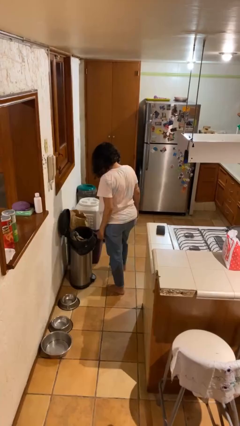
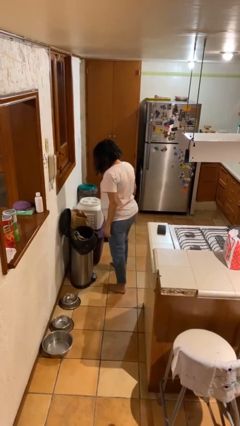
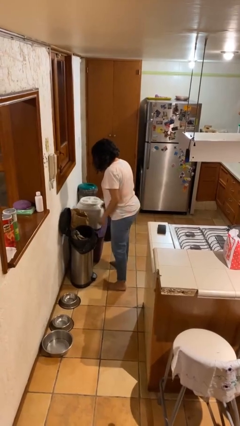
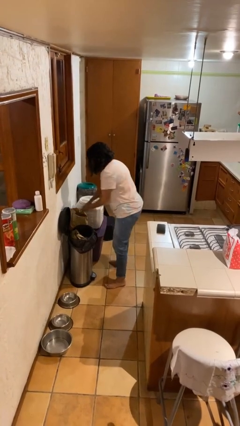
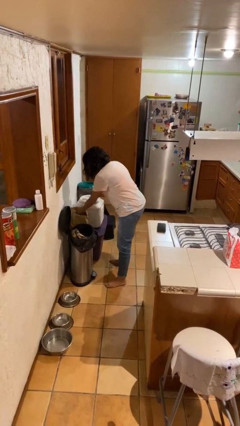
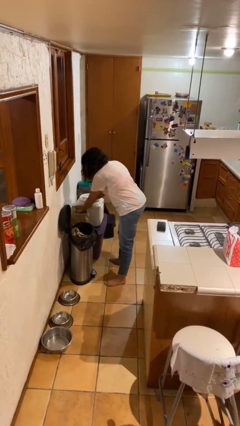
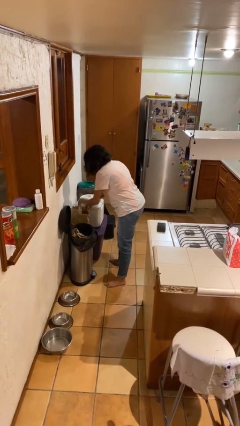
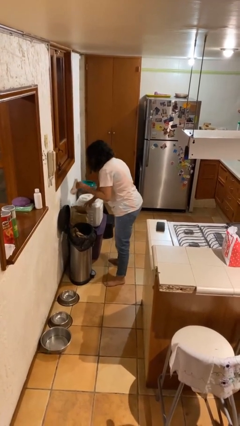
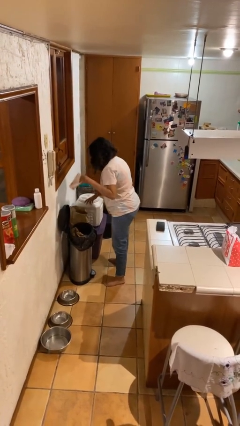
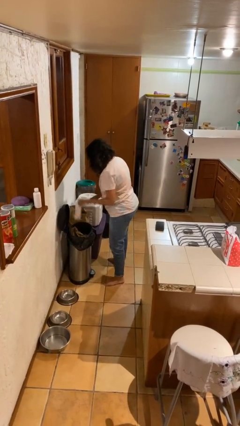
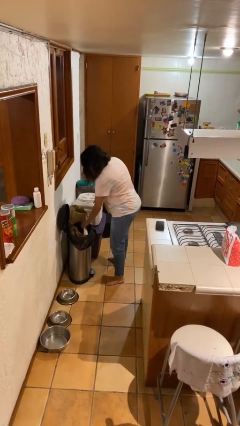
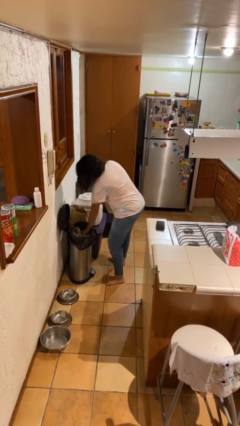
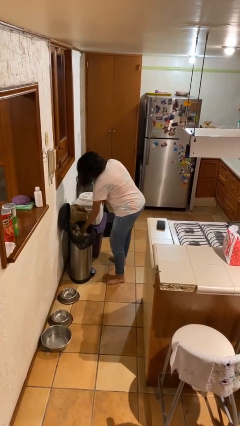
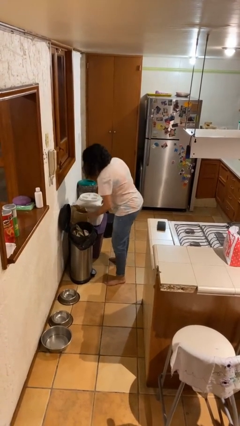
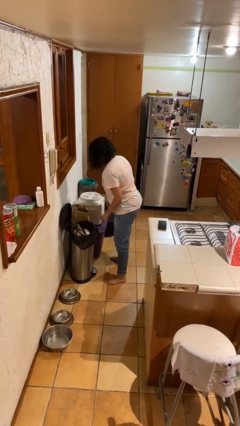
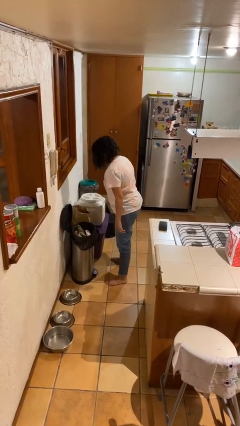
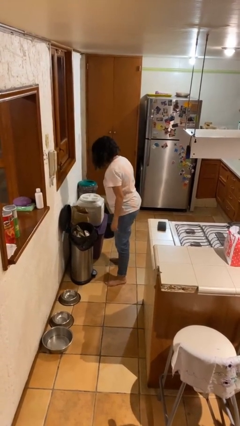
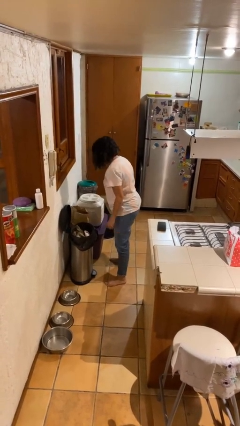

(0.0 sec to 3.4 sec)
person discards trash

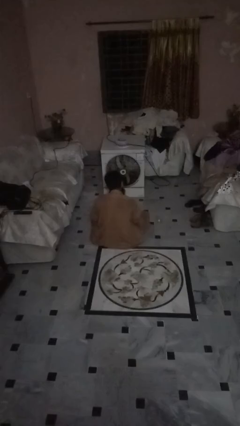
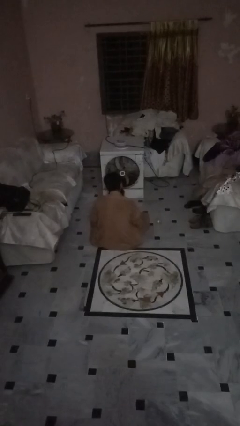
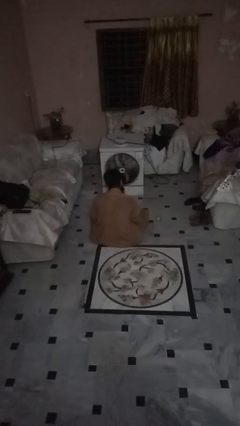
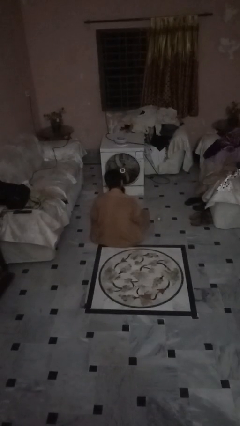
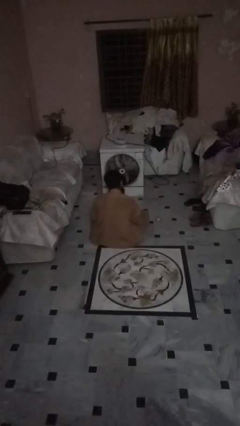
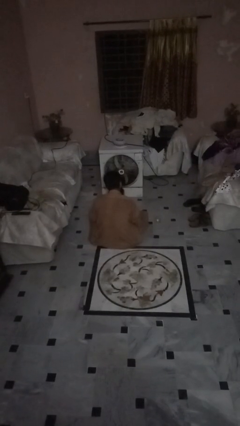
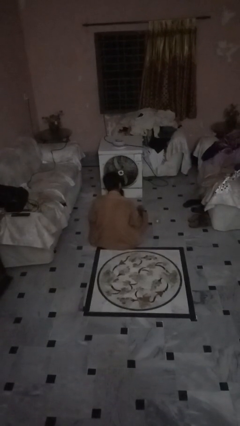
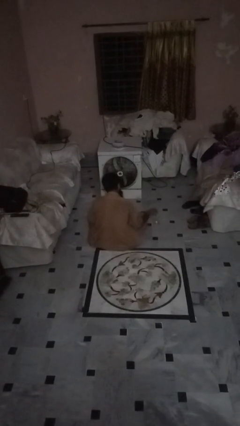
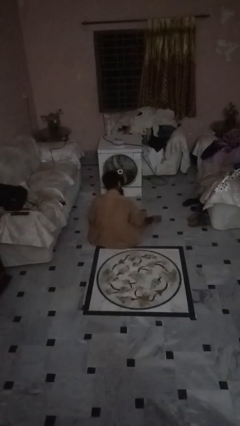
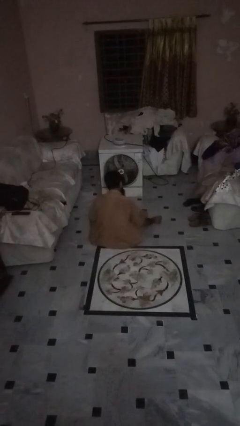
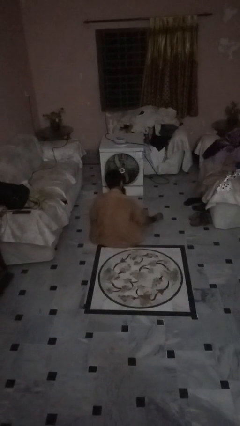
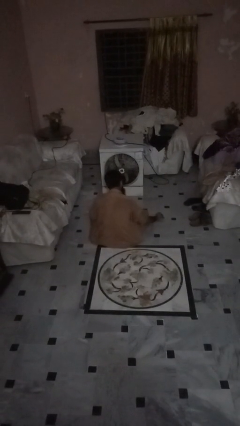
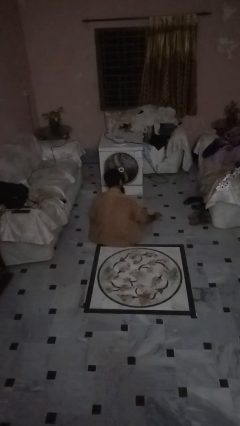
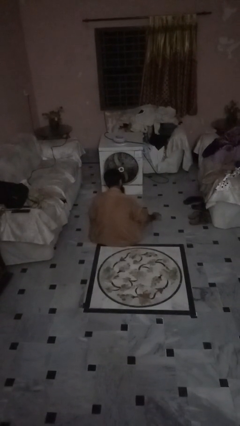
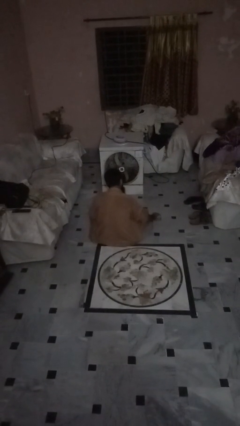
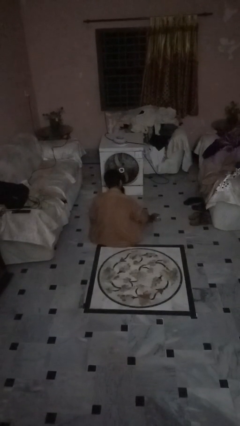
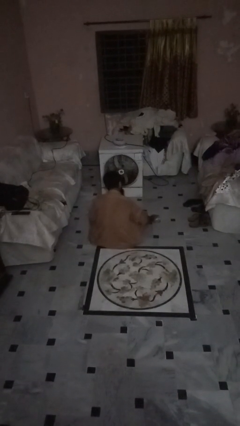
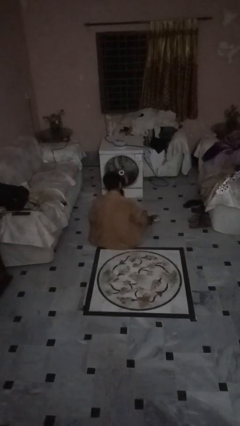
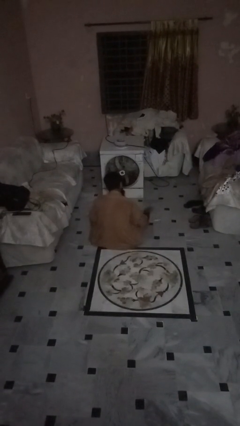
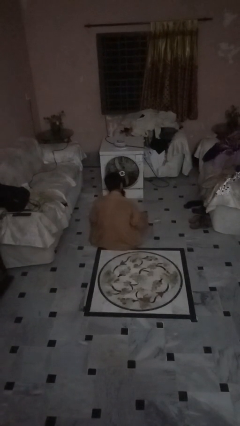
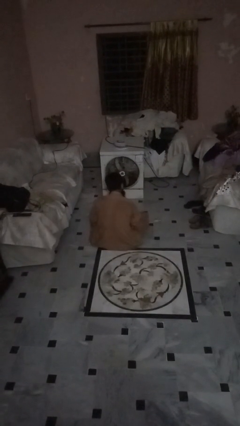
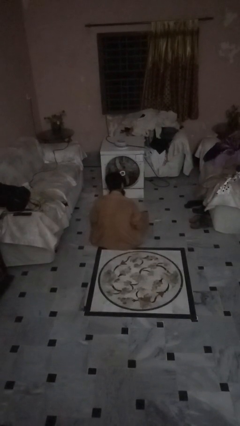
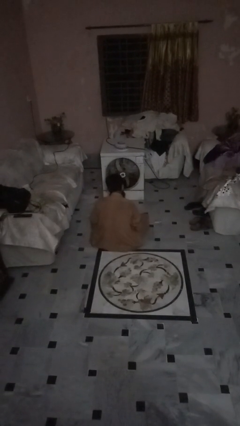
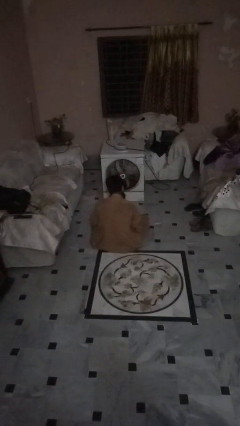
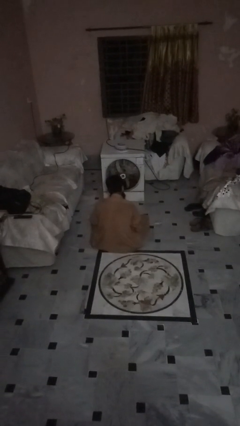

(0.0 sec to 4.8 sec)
person spills on floor

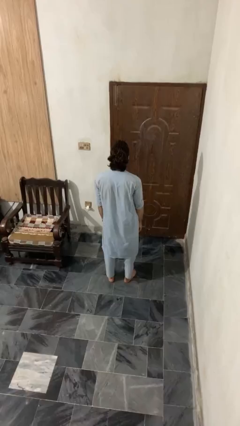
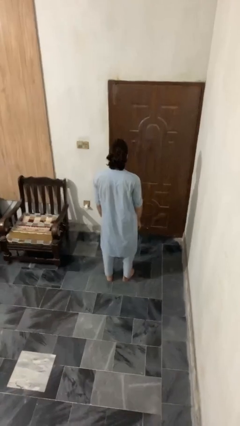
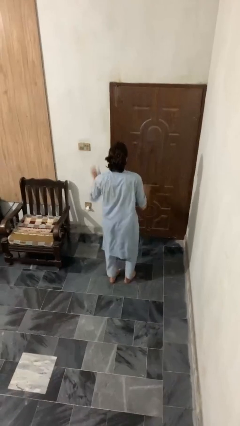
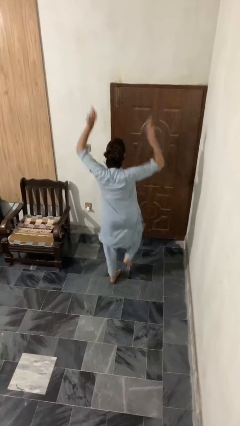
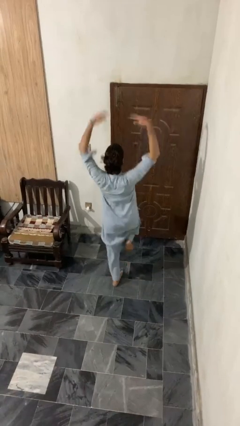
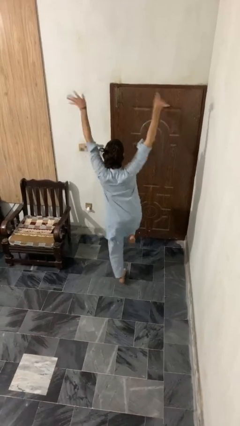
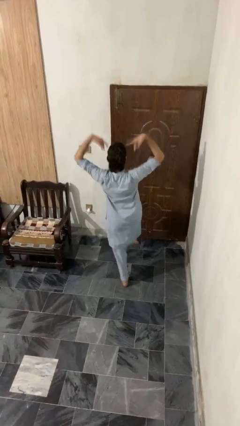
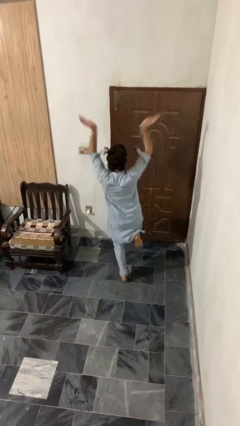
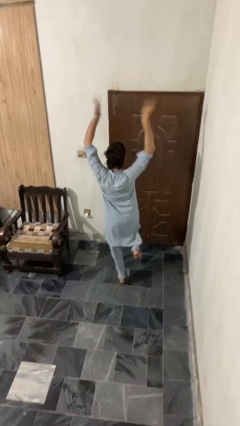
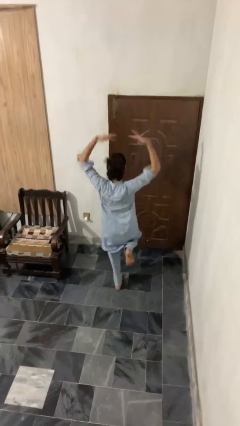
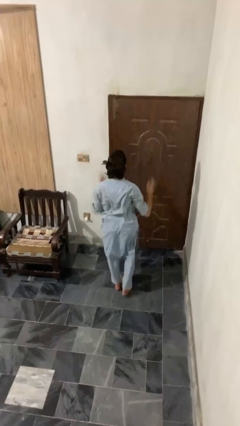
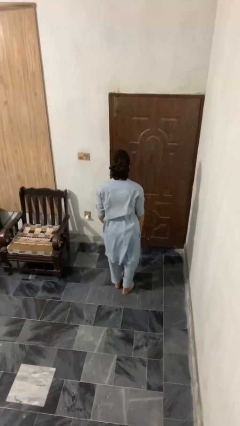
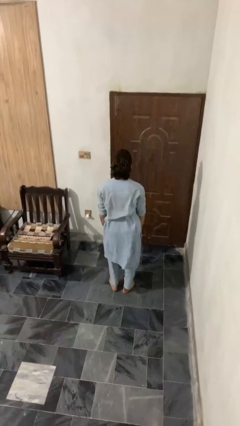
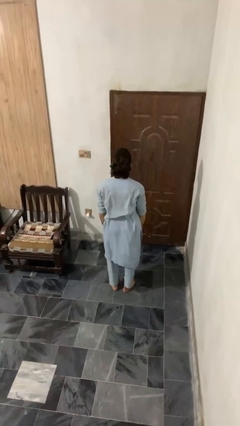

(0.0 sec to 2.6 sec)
person dances in place

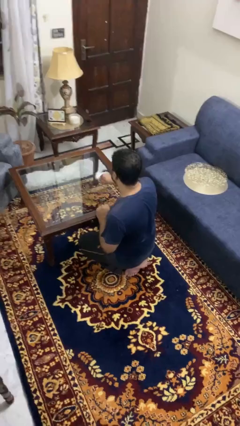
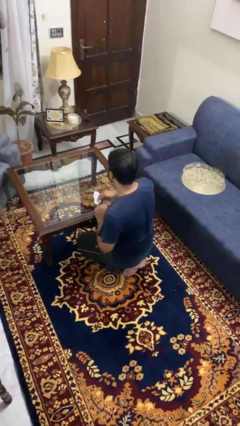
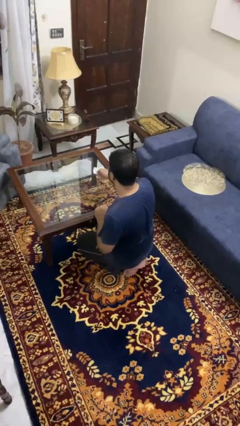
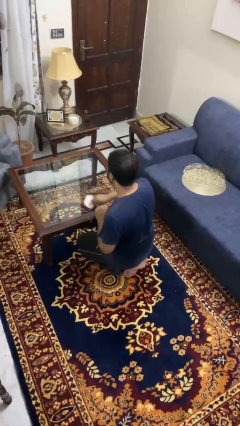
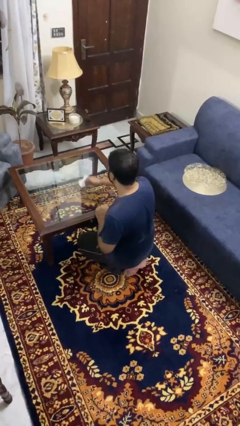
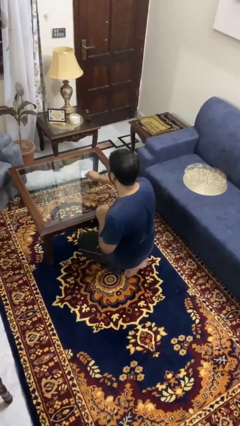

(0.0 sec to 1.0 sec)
person cleans table with rag

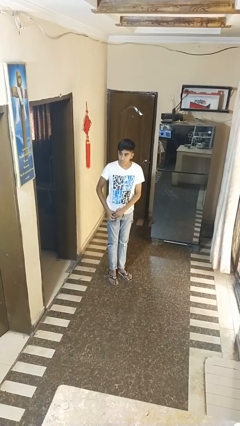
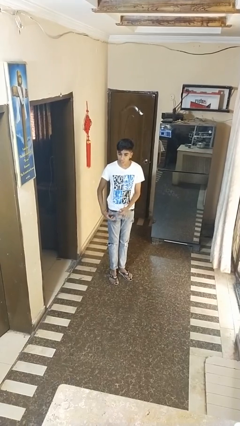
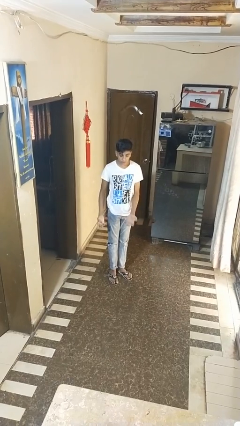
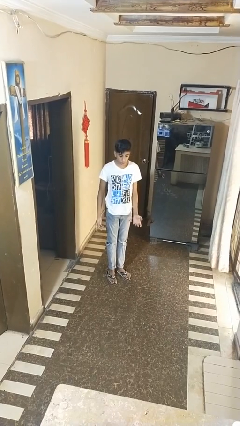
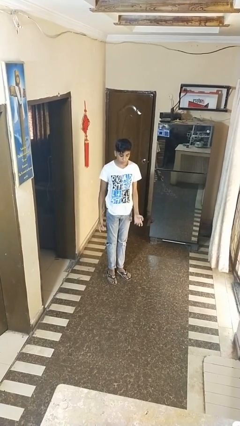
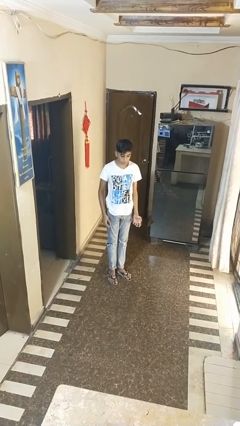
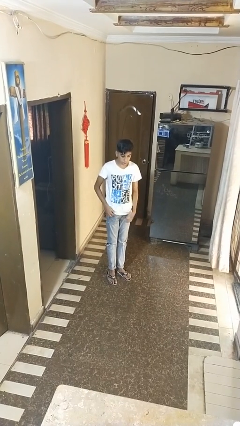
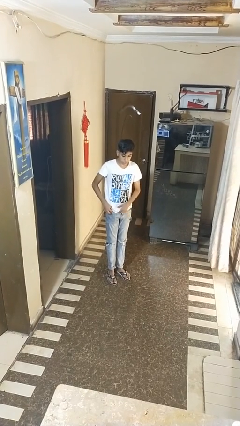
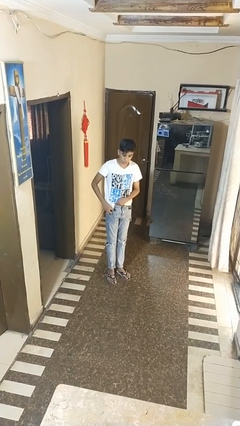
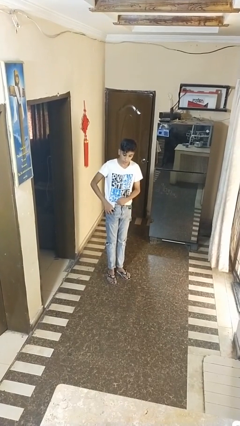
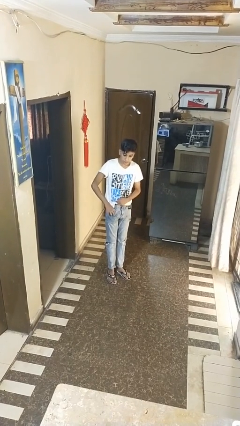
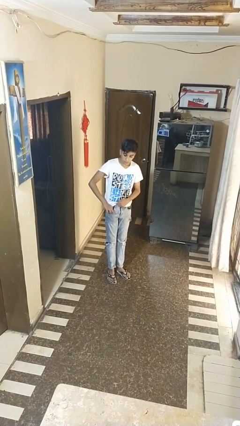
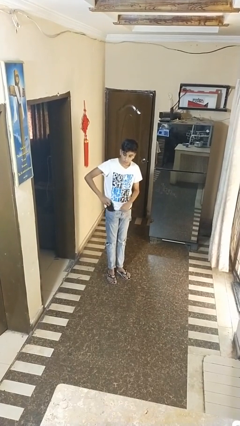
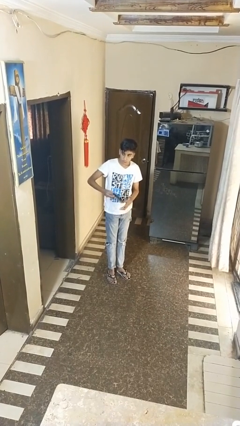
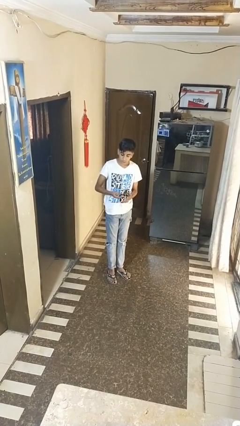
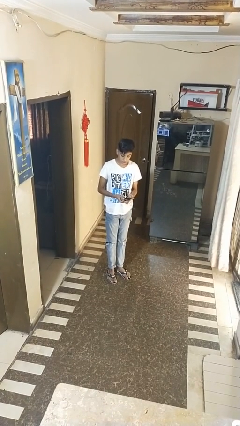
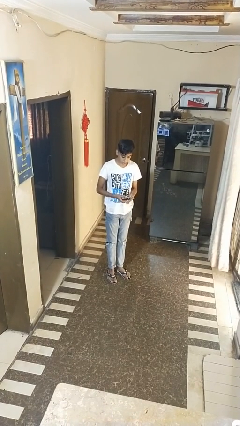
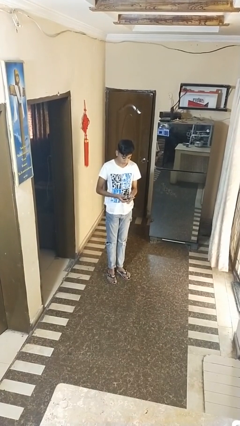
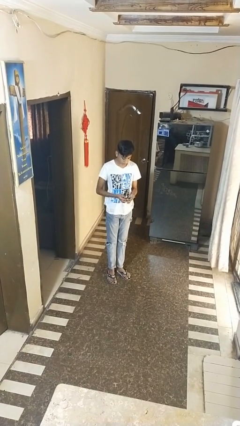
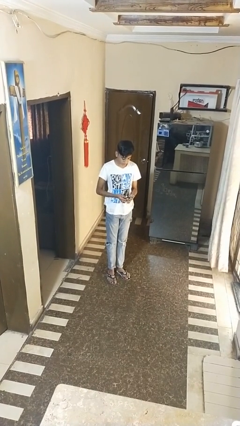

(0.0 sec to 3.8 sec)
person takes phone from pocket

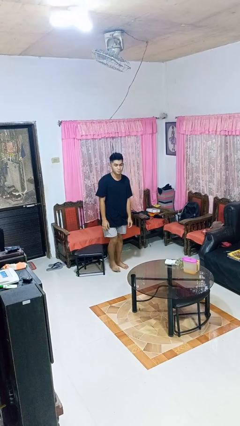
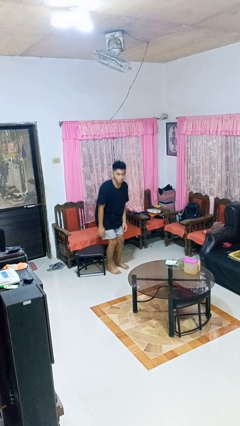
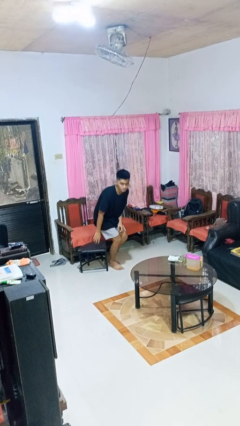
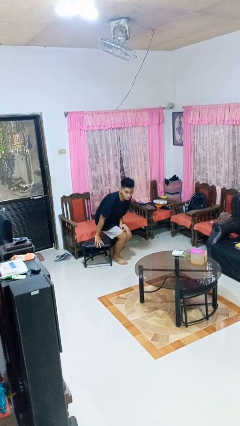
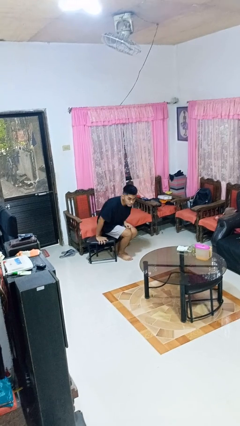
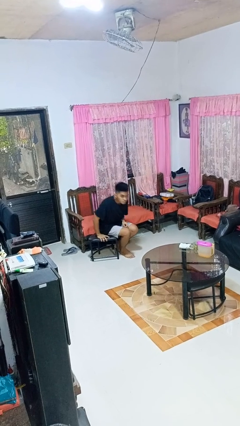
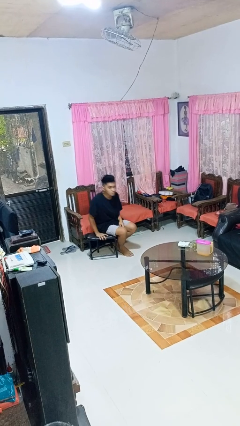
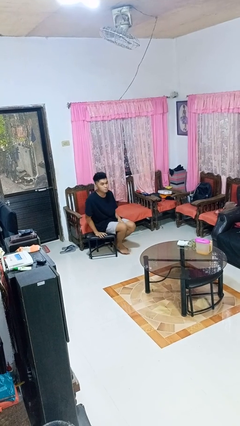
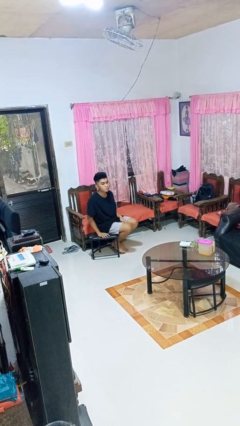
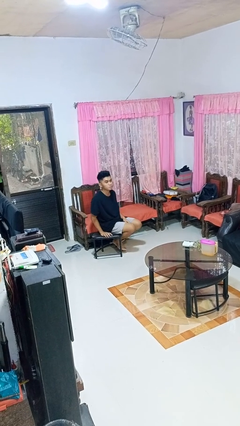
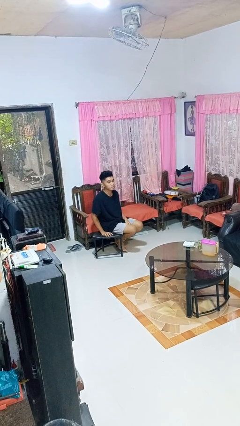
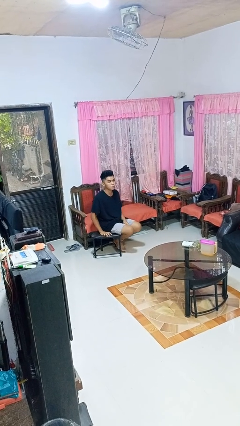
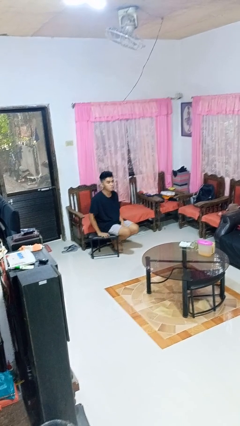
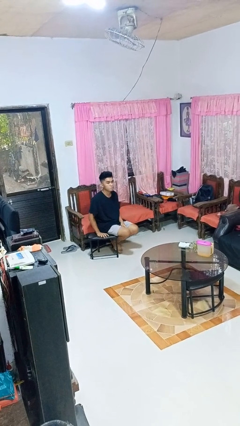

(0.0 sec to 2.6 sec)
person sits down
